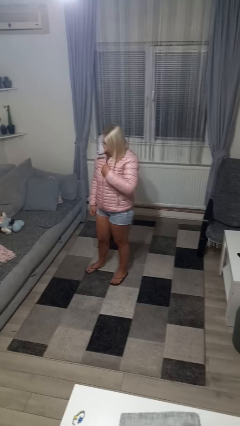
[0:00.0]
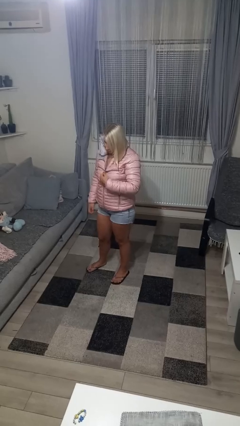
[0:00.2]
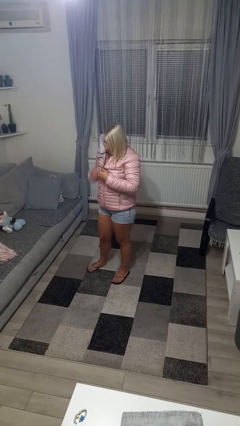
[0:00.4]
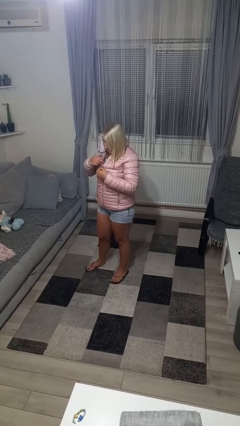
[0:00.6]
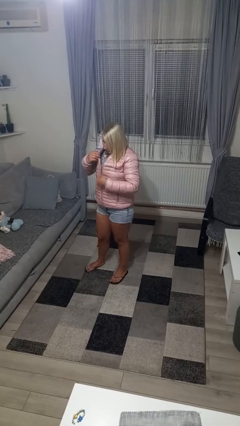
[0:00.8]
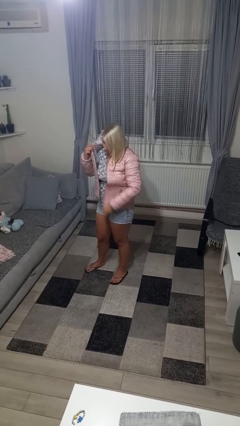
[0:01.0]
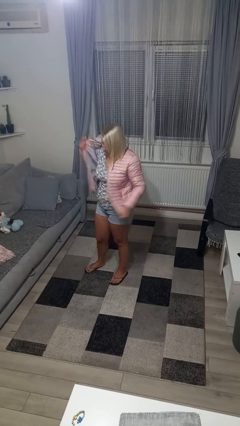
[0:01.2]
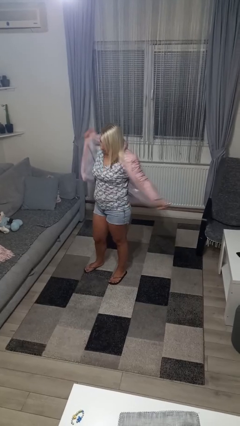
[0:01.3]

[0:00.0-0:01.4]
person unzips jacket

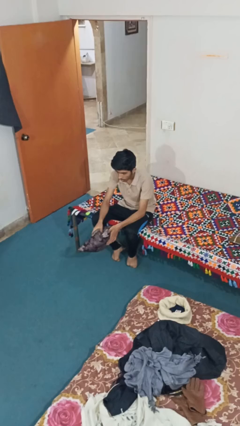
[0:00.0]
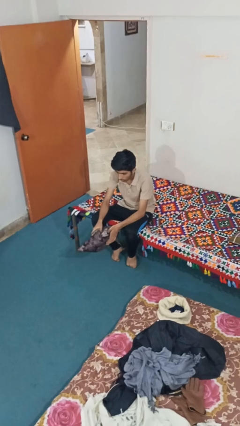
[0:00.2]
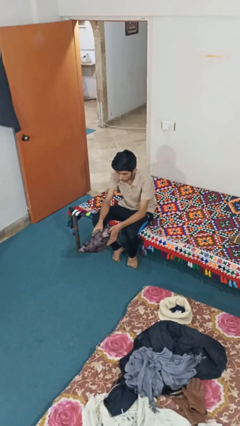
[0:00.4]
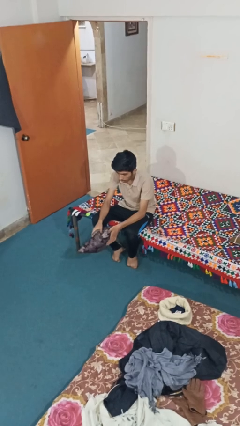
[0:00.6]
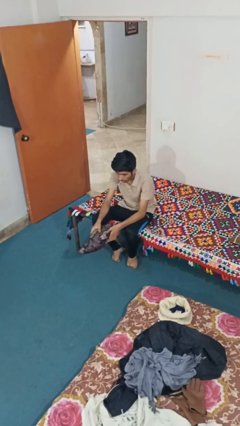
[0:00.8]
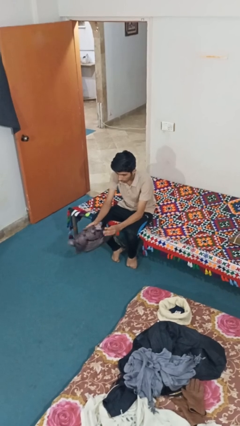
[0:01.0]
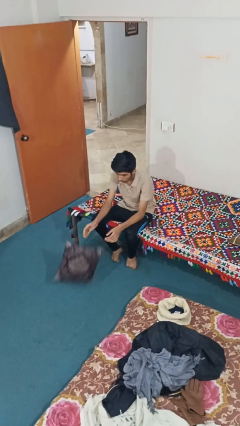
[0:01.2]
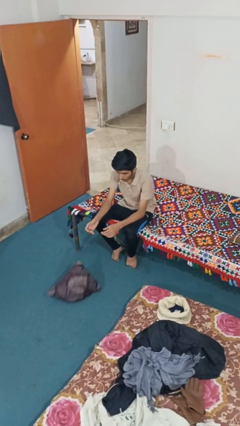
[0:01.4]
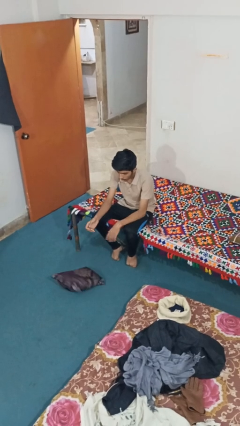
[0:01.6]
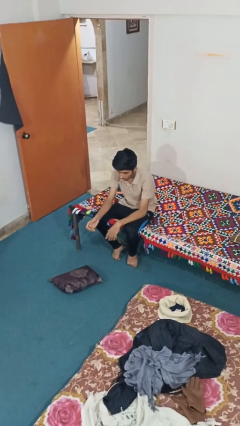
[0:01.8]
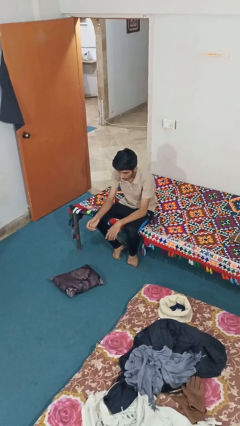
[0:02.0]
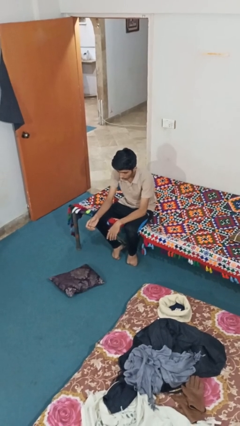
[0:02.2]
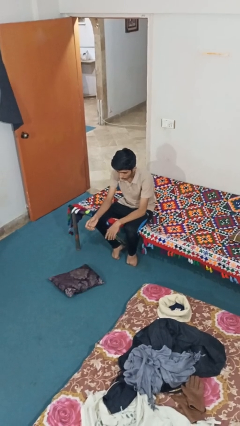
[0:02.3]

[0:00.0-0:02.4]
person drops object

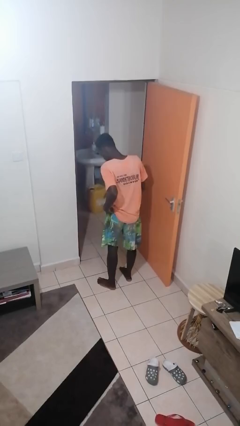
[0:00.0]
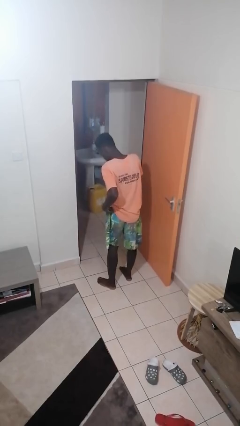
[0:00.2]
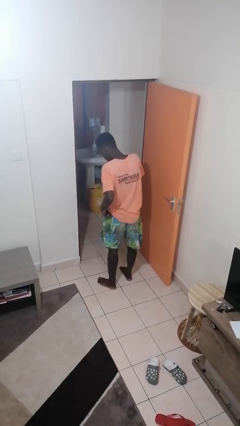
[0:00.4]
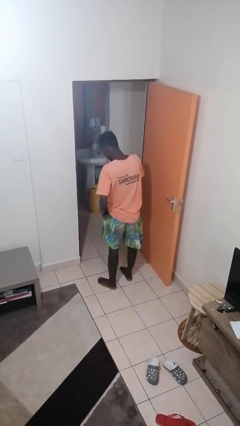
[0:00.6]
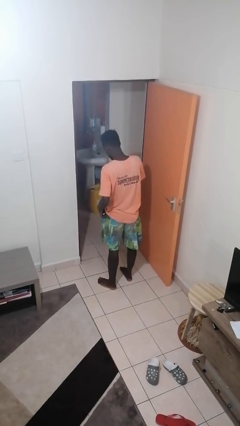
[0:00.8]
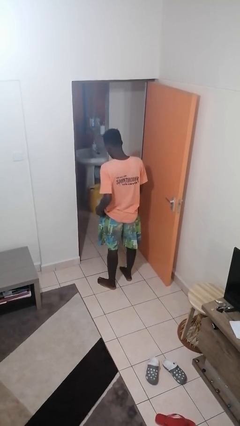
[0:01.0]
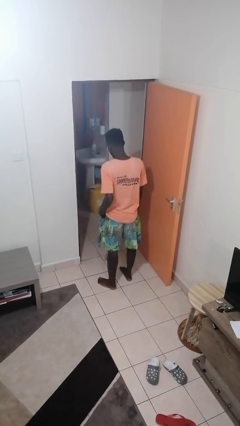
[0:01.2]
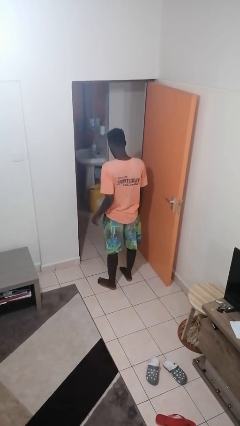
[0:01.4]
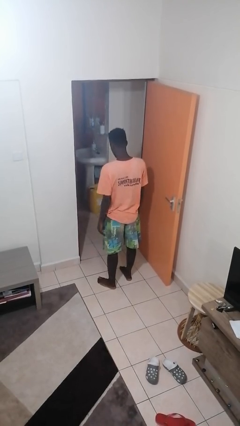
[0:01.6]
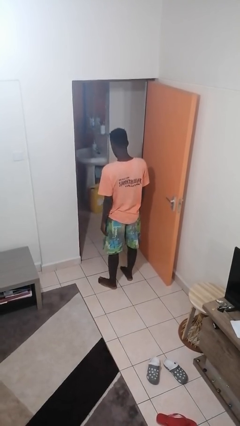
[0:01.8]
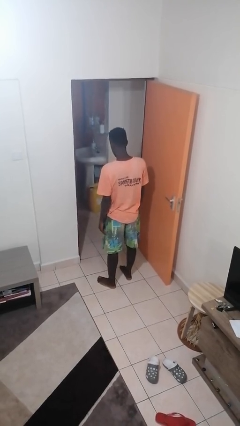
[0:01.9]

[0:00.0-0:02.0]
person puts phone into pocket

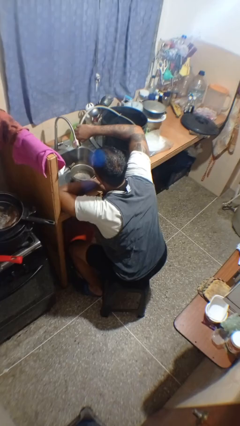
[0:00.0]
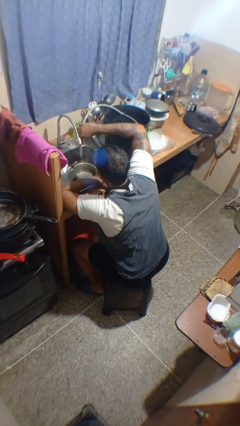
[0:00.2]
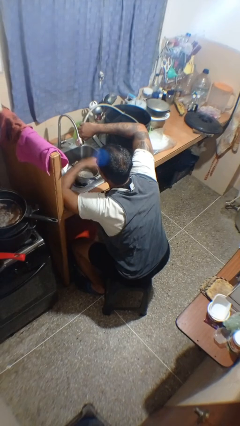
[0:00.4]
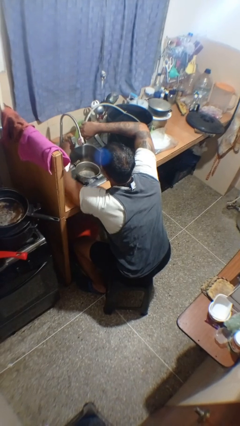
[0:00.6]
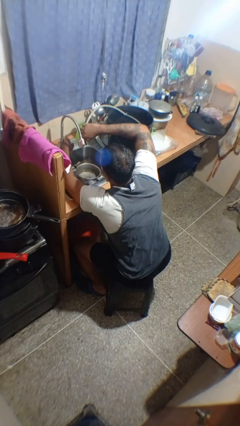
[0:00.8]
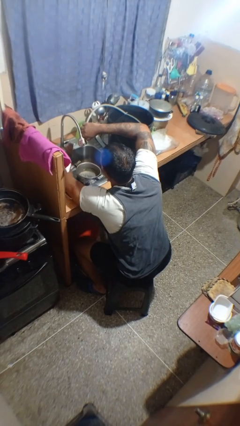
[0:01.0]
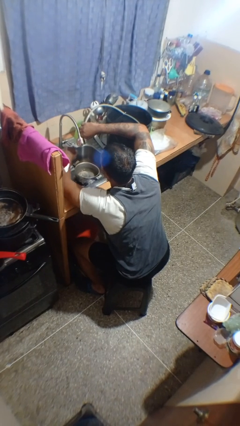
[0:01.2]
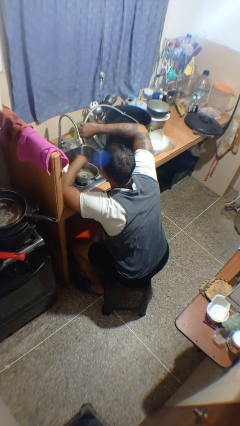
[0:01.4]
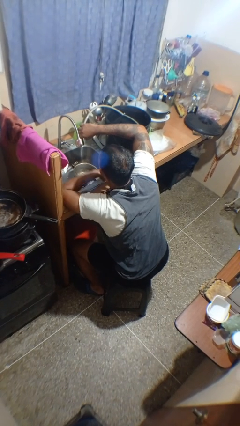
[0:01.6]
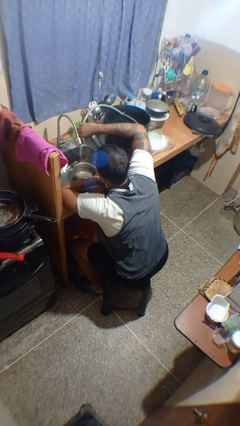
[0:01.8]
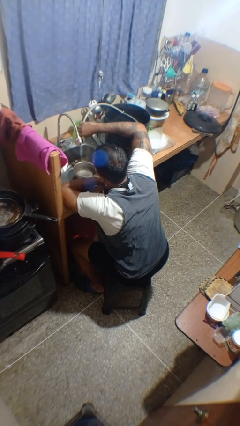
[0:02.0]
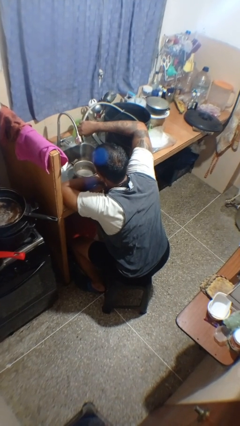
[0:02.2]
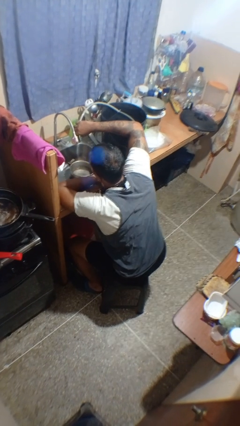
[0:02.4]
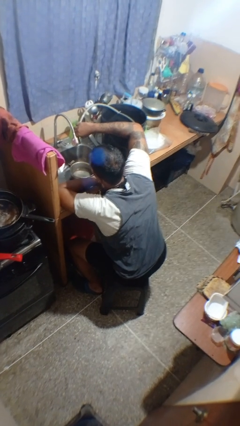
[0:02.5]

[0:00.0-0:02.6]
person turns on faucet

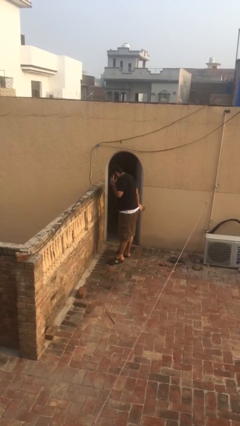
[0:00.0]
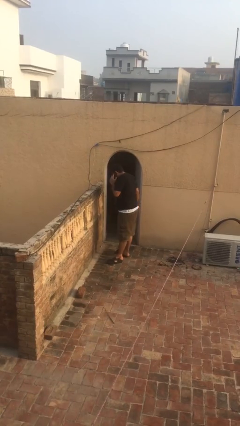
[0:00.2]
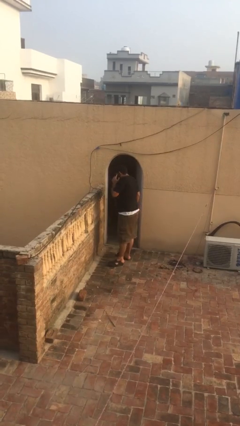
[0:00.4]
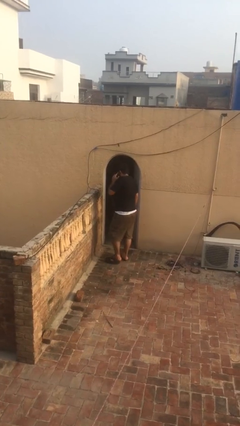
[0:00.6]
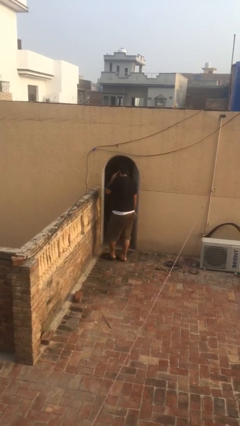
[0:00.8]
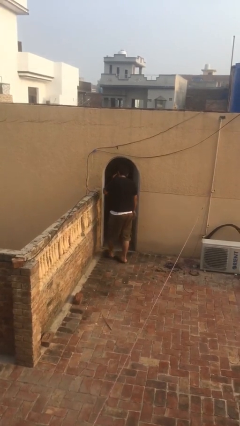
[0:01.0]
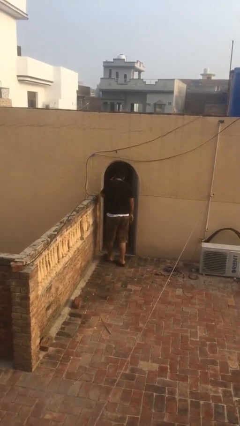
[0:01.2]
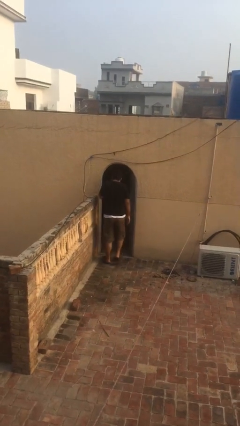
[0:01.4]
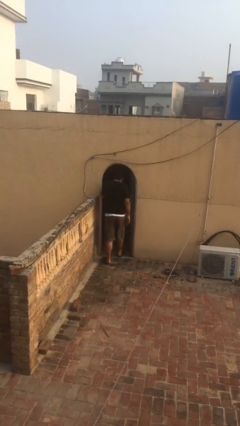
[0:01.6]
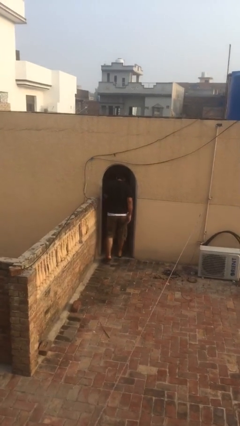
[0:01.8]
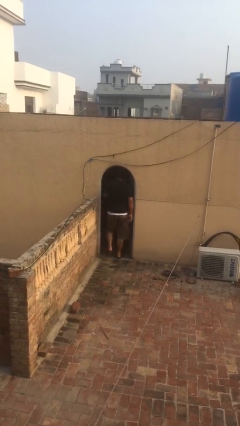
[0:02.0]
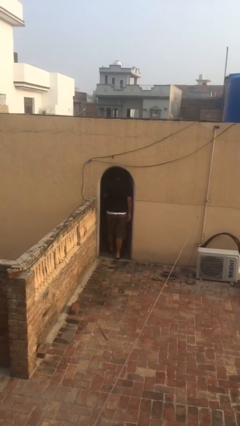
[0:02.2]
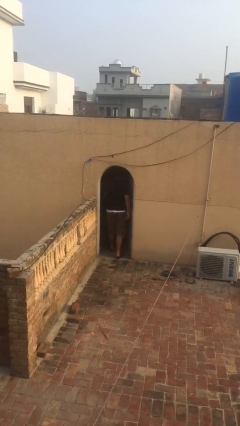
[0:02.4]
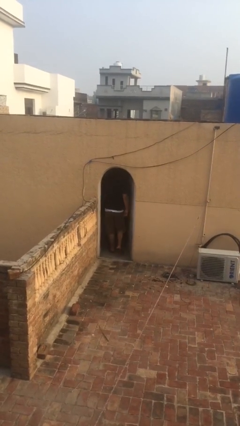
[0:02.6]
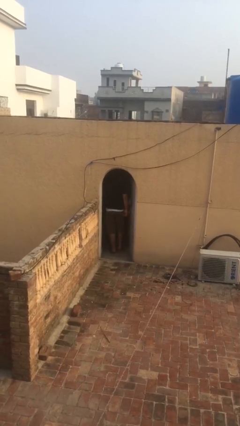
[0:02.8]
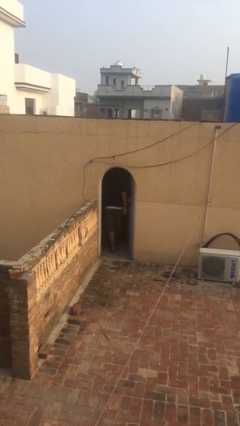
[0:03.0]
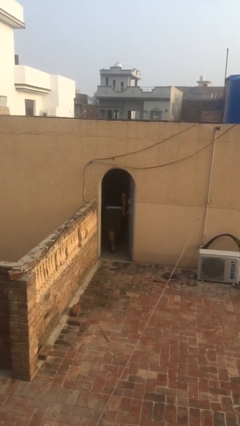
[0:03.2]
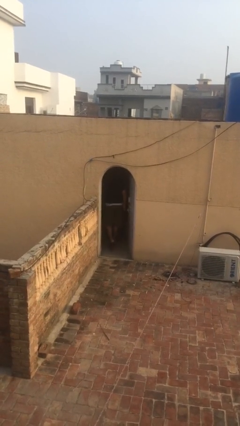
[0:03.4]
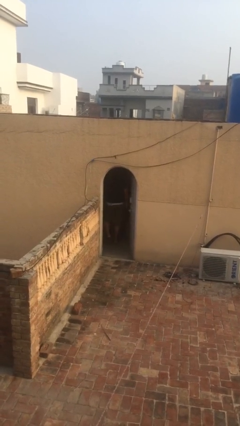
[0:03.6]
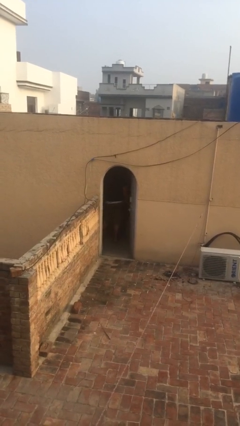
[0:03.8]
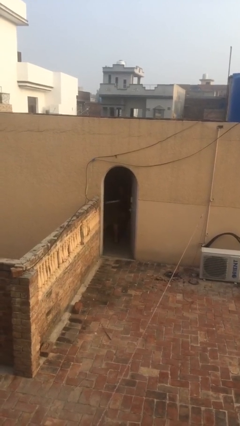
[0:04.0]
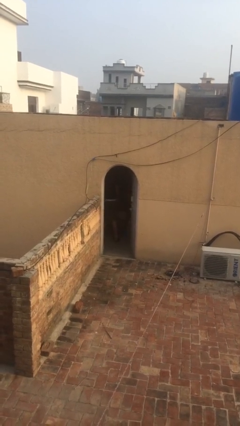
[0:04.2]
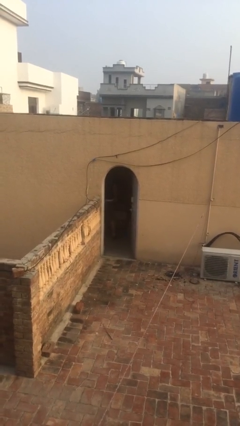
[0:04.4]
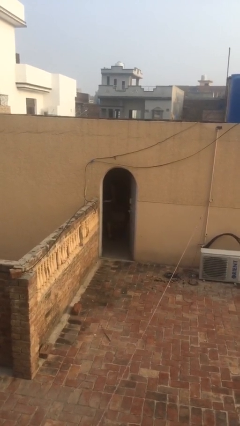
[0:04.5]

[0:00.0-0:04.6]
person exits scene through structure

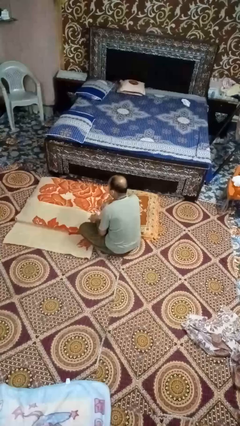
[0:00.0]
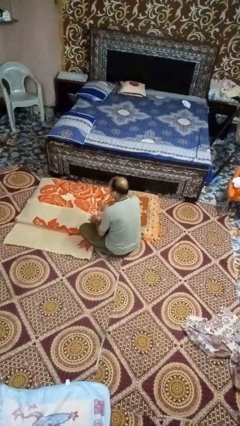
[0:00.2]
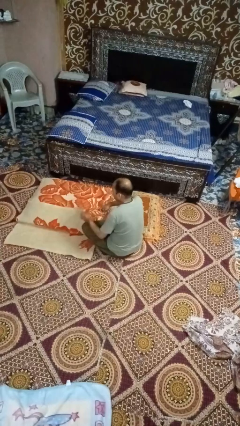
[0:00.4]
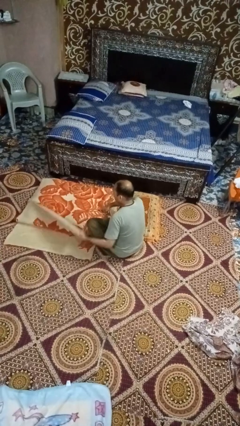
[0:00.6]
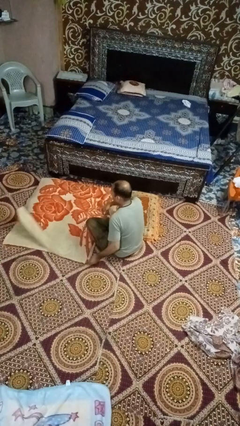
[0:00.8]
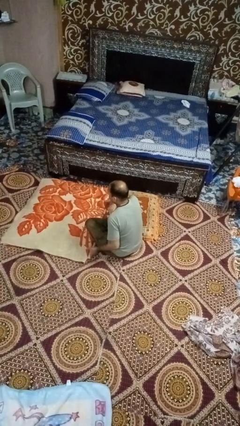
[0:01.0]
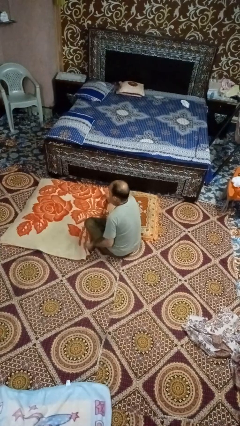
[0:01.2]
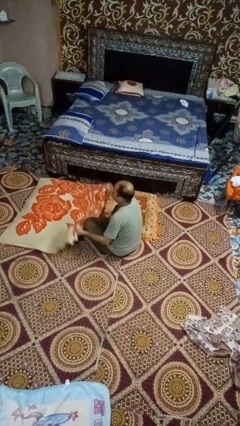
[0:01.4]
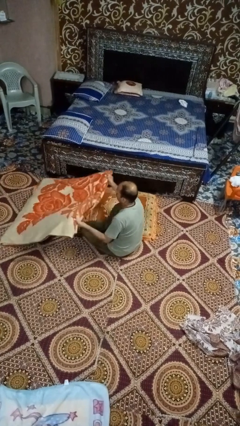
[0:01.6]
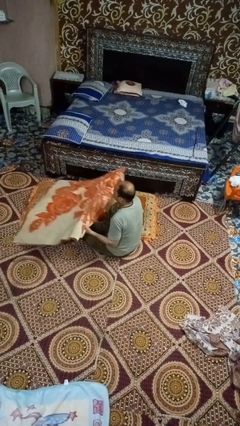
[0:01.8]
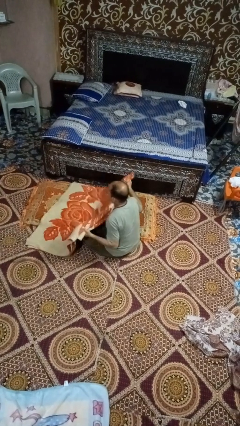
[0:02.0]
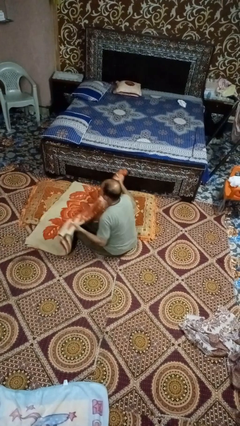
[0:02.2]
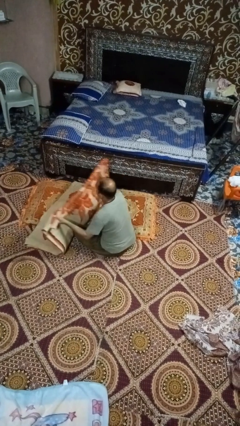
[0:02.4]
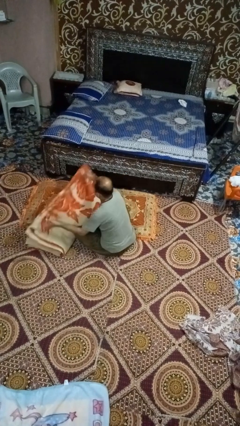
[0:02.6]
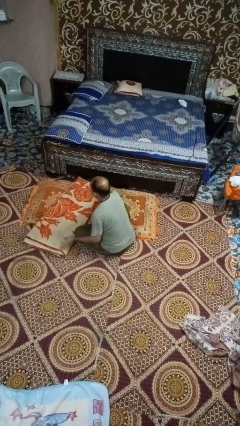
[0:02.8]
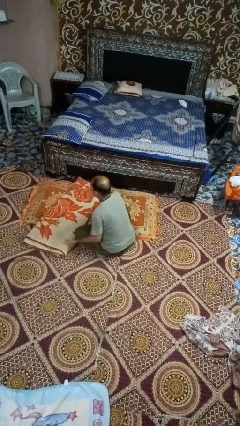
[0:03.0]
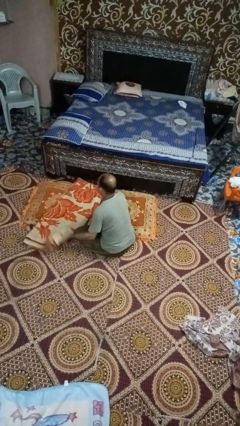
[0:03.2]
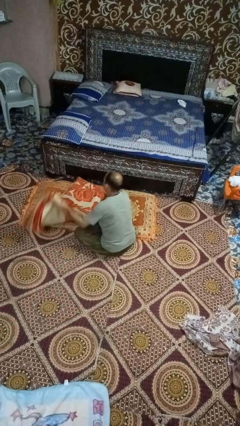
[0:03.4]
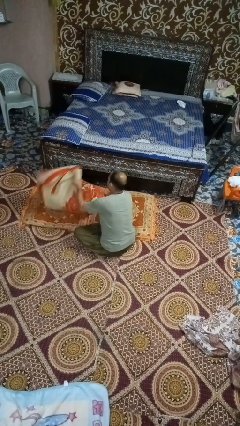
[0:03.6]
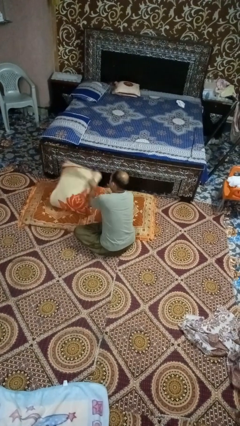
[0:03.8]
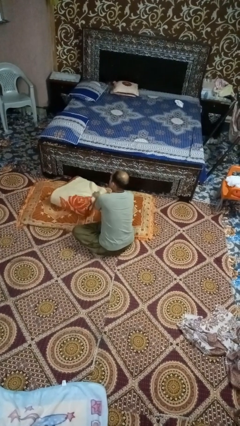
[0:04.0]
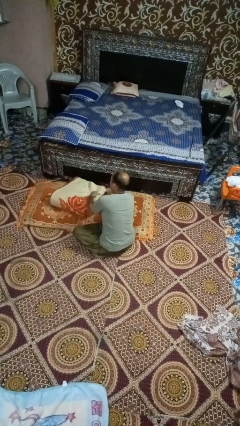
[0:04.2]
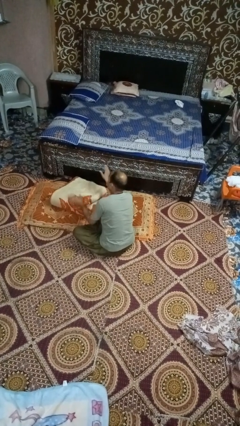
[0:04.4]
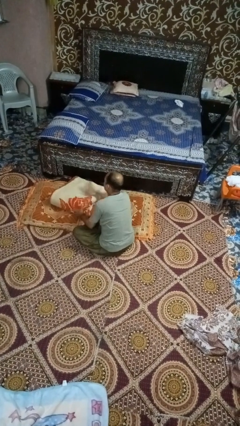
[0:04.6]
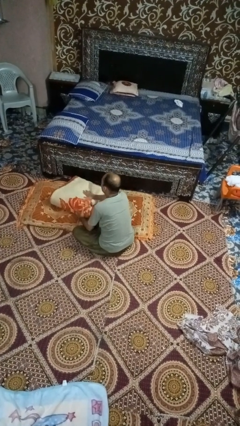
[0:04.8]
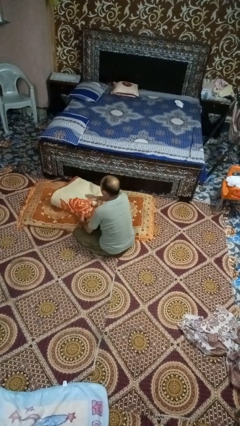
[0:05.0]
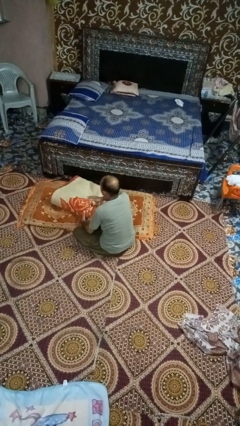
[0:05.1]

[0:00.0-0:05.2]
person folds blanket
